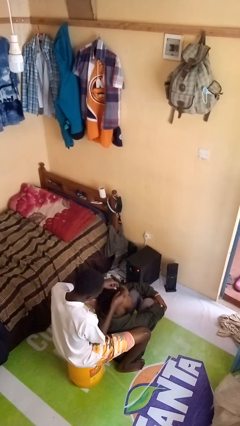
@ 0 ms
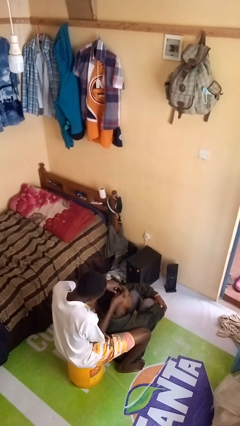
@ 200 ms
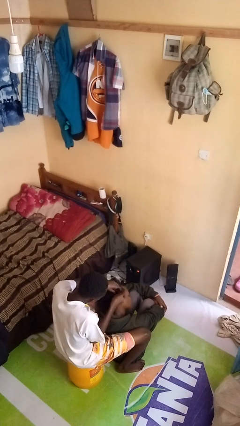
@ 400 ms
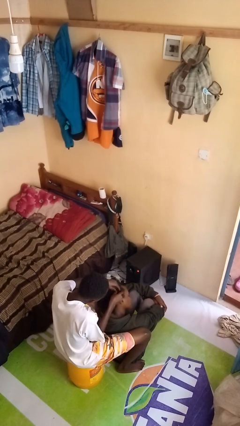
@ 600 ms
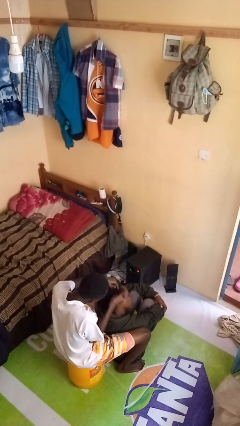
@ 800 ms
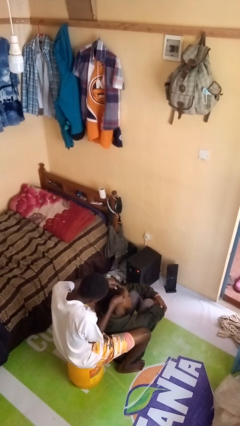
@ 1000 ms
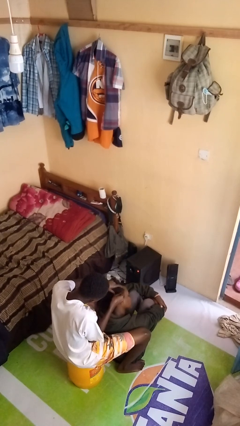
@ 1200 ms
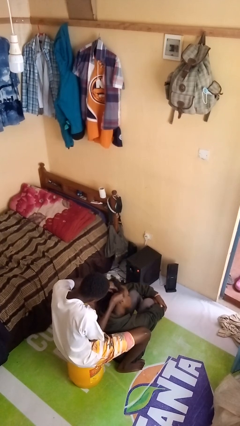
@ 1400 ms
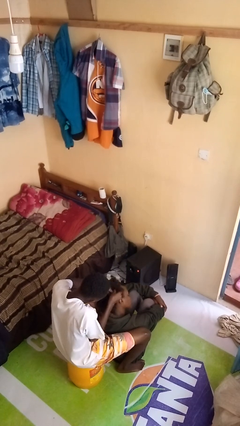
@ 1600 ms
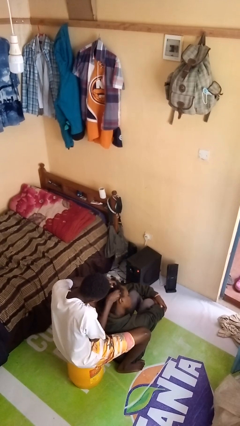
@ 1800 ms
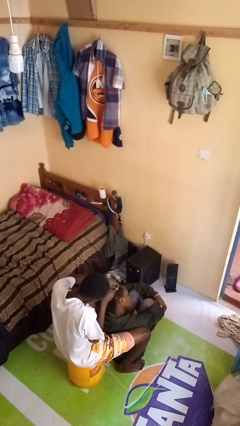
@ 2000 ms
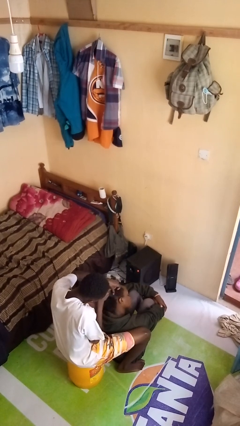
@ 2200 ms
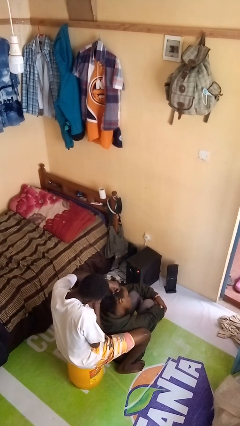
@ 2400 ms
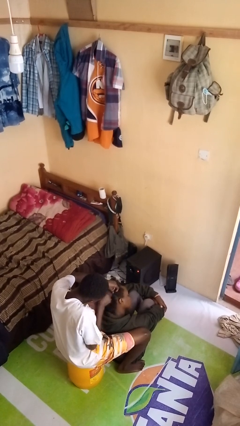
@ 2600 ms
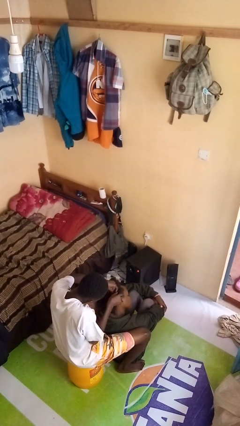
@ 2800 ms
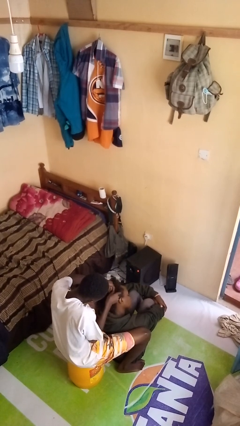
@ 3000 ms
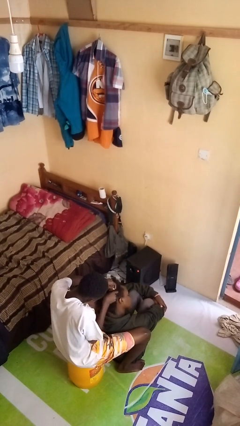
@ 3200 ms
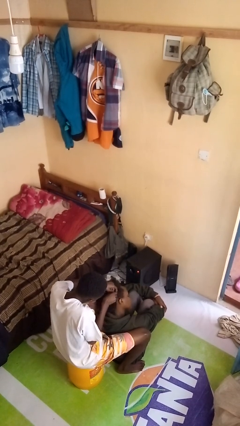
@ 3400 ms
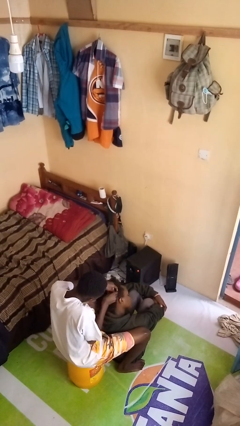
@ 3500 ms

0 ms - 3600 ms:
person braids hair of person

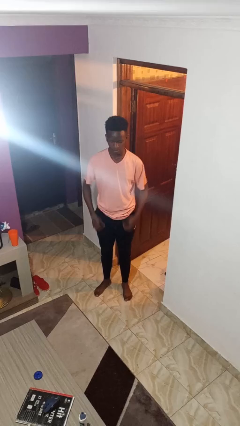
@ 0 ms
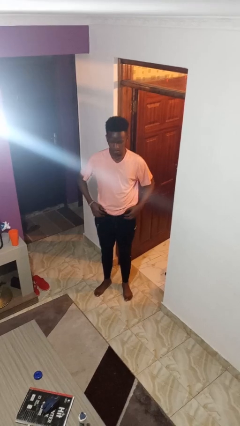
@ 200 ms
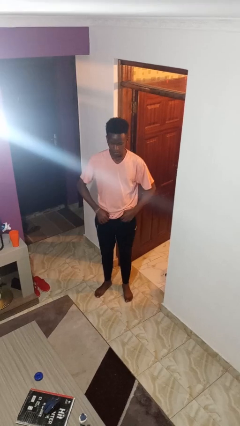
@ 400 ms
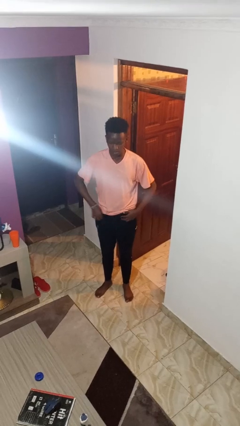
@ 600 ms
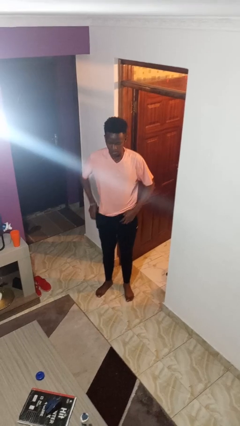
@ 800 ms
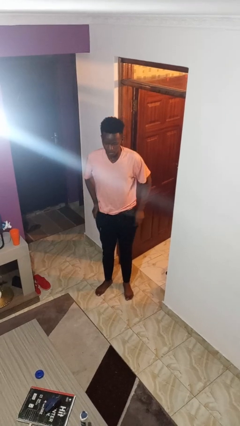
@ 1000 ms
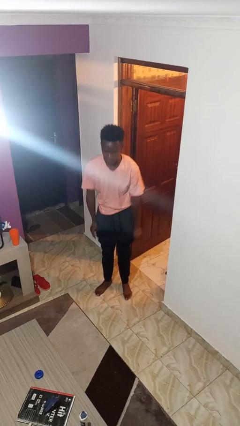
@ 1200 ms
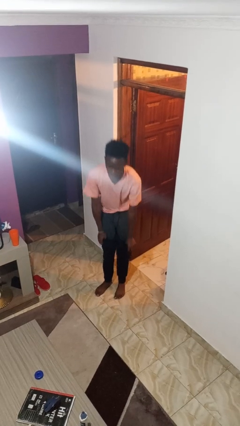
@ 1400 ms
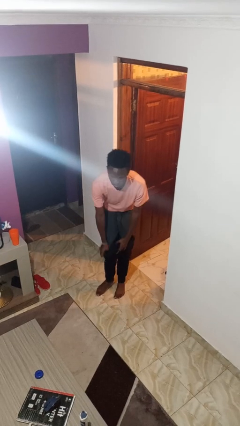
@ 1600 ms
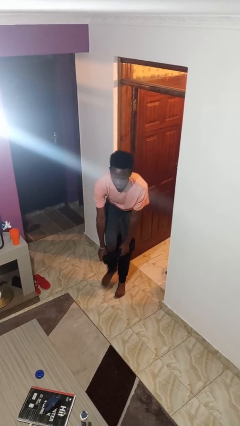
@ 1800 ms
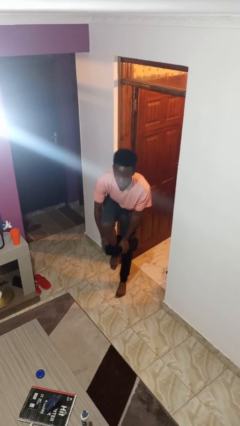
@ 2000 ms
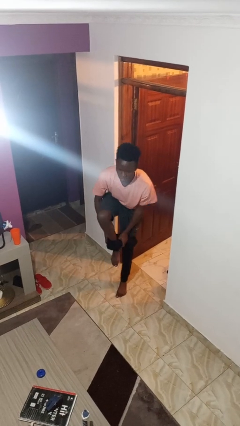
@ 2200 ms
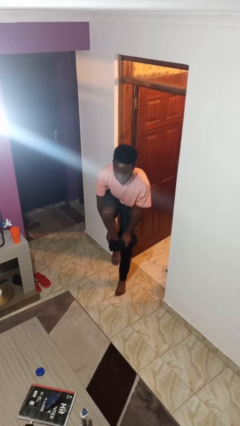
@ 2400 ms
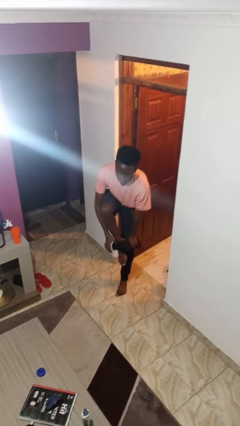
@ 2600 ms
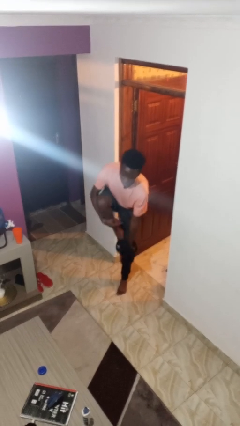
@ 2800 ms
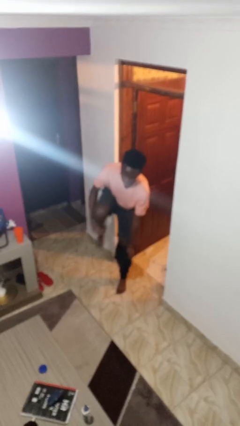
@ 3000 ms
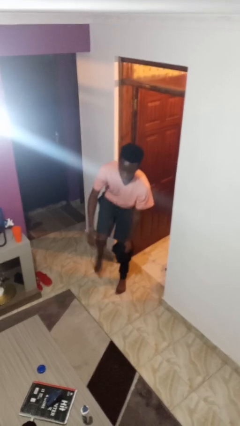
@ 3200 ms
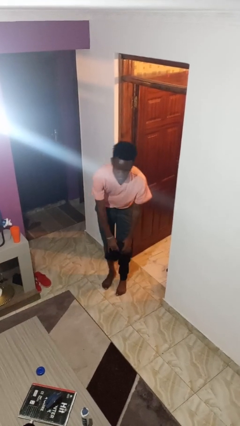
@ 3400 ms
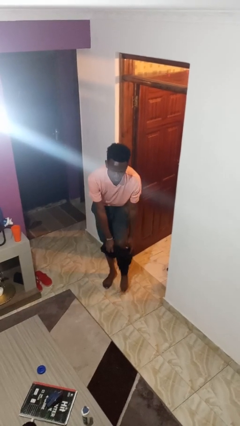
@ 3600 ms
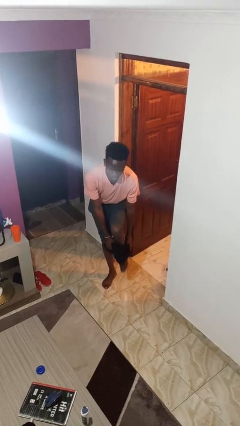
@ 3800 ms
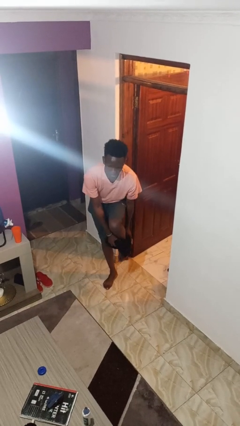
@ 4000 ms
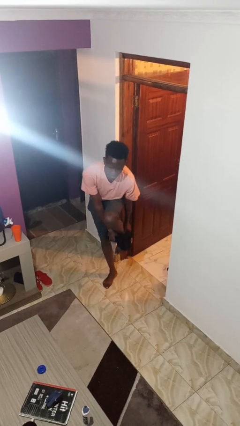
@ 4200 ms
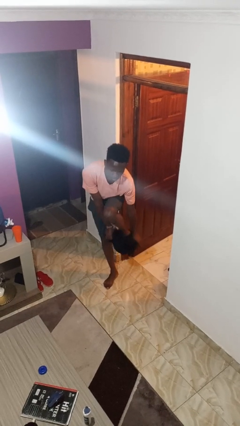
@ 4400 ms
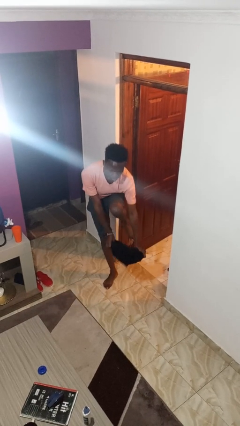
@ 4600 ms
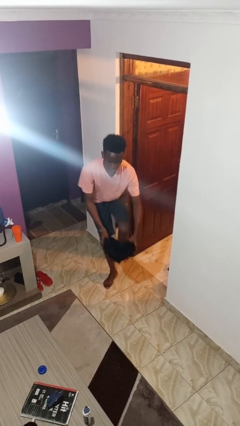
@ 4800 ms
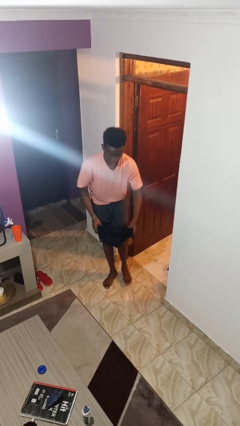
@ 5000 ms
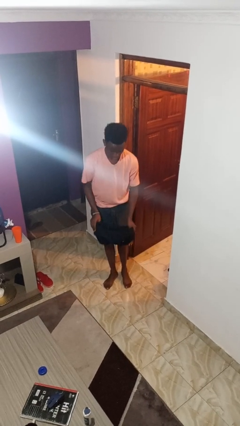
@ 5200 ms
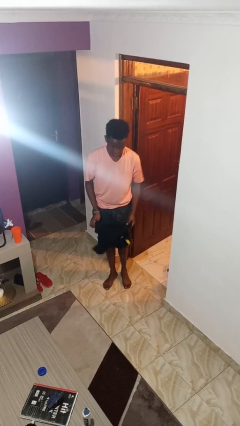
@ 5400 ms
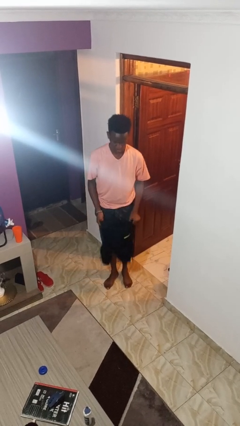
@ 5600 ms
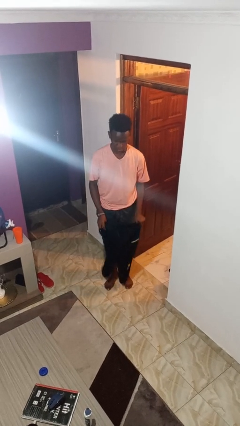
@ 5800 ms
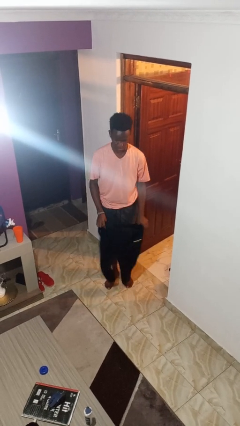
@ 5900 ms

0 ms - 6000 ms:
person takes off pants

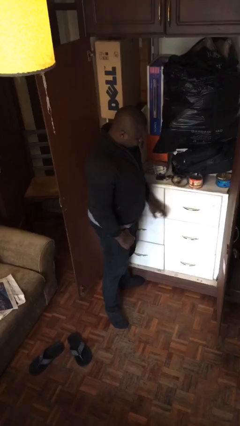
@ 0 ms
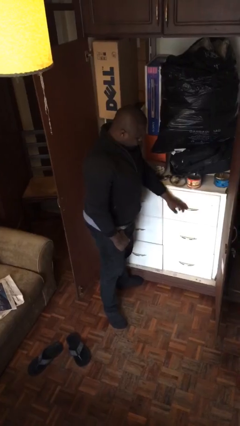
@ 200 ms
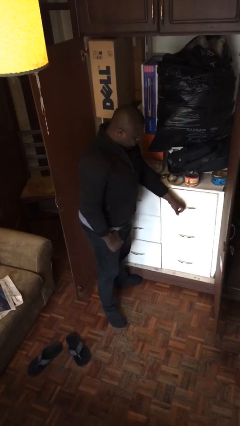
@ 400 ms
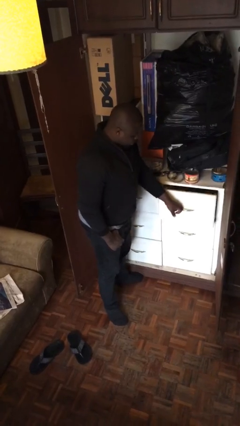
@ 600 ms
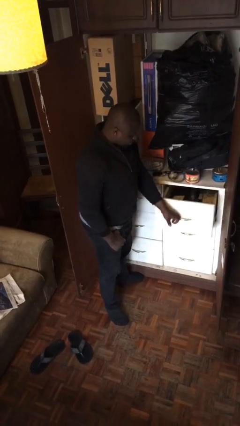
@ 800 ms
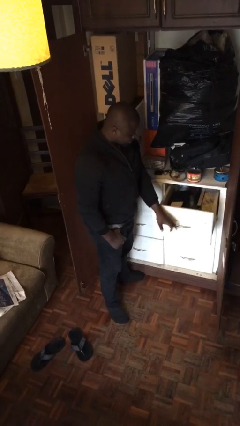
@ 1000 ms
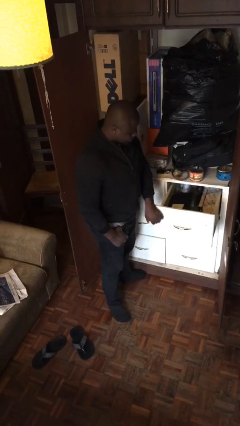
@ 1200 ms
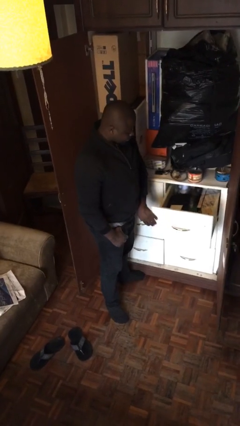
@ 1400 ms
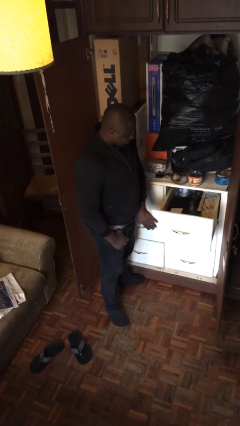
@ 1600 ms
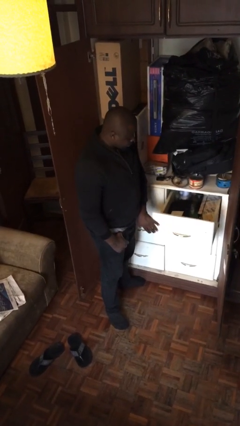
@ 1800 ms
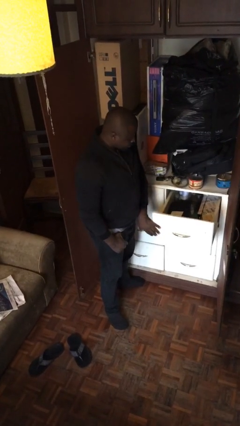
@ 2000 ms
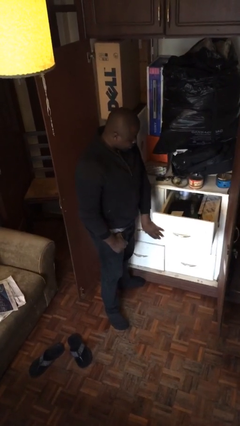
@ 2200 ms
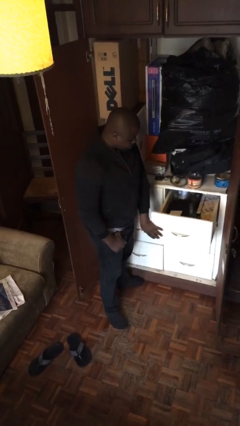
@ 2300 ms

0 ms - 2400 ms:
person opens dresser drawer

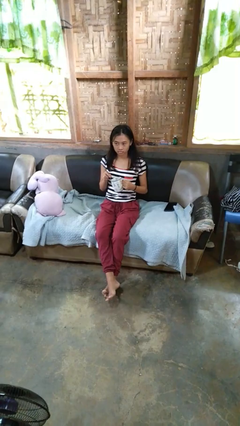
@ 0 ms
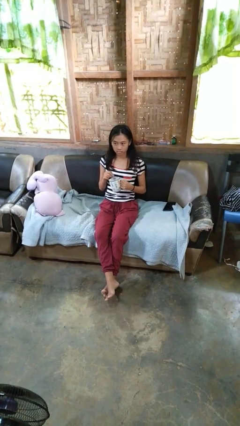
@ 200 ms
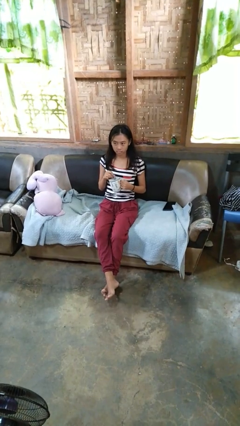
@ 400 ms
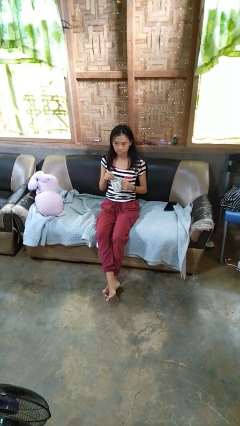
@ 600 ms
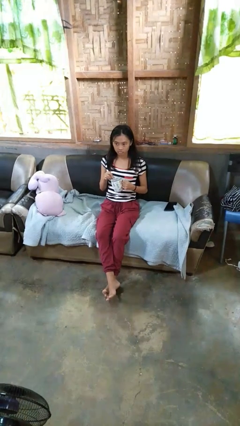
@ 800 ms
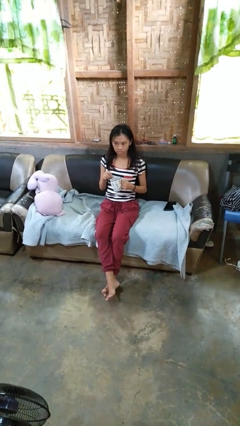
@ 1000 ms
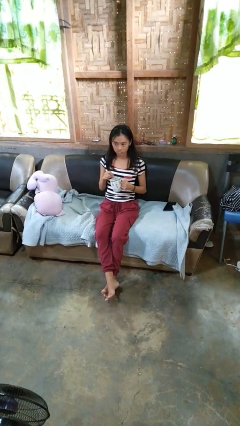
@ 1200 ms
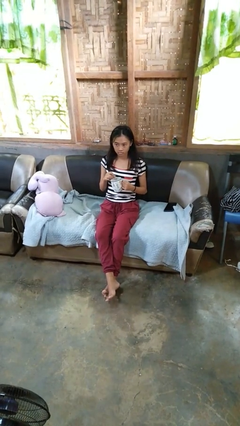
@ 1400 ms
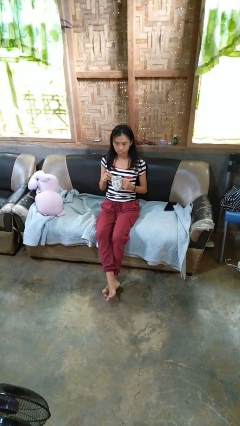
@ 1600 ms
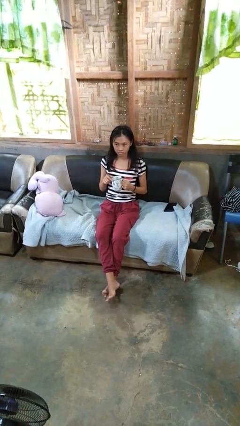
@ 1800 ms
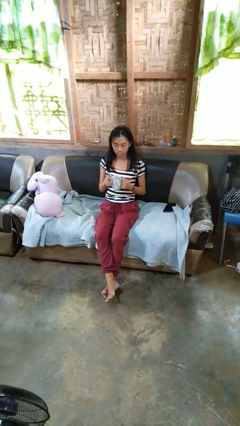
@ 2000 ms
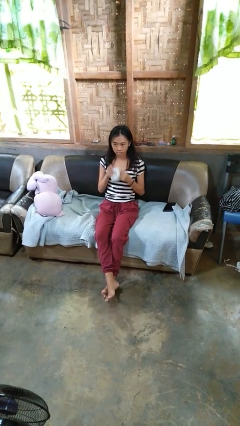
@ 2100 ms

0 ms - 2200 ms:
person stirs mug

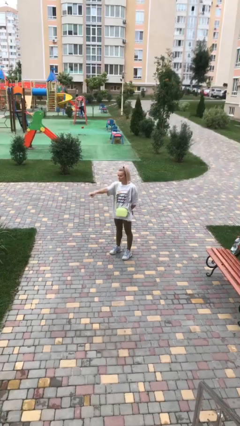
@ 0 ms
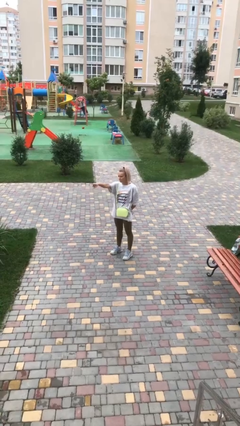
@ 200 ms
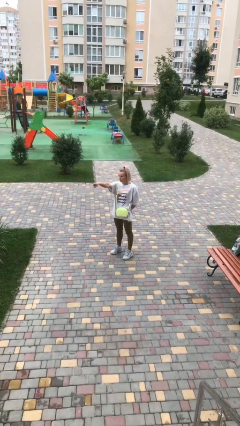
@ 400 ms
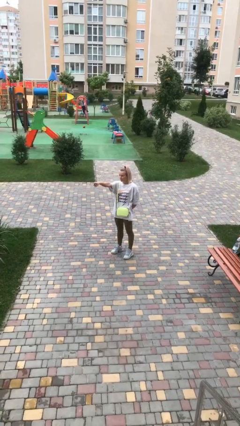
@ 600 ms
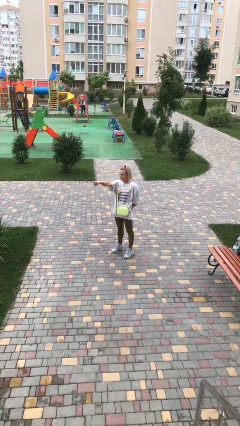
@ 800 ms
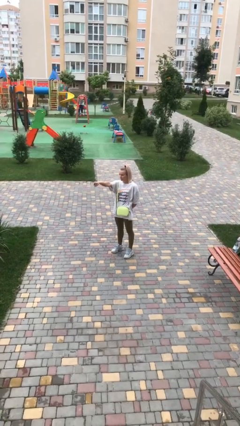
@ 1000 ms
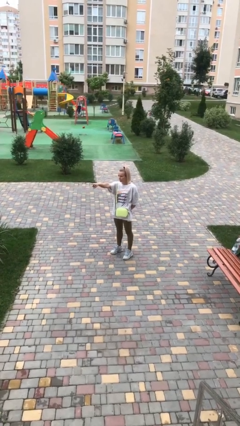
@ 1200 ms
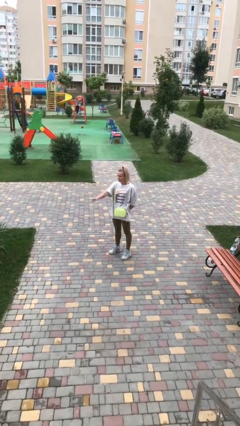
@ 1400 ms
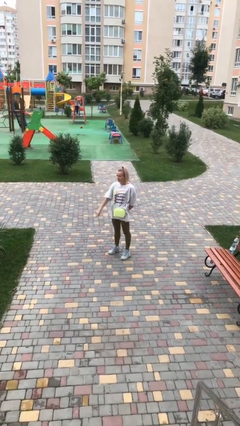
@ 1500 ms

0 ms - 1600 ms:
person points at person

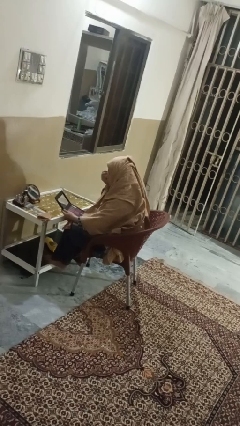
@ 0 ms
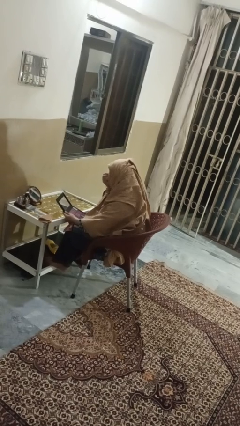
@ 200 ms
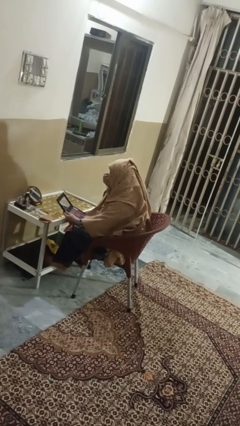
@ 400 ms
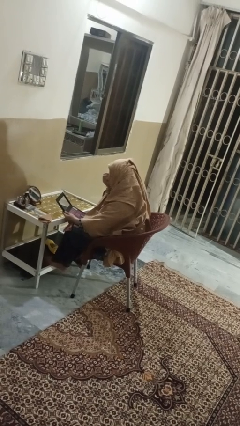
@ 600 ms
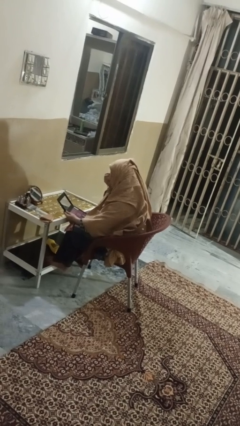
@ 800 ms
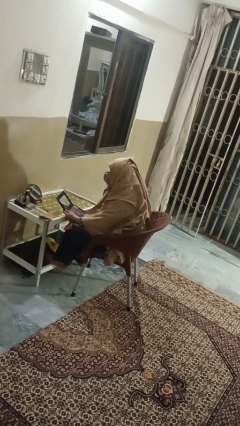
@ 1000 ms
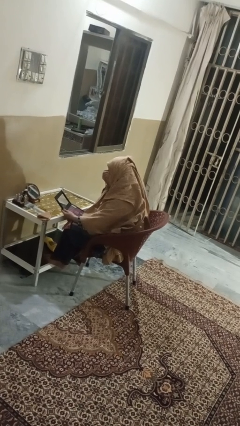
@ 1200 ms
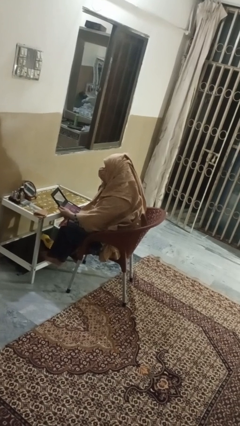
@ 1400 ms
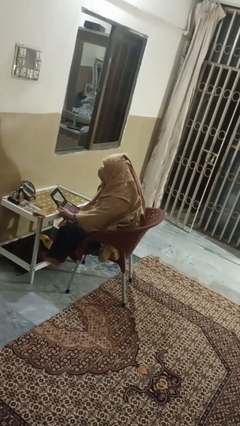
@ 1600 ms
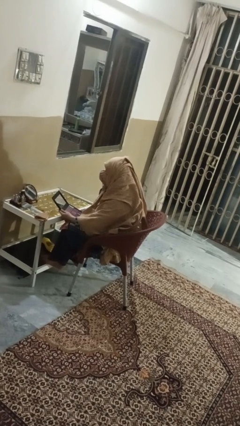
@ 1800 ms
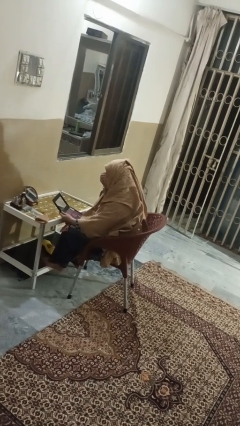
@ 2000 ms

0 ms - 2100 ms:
person applies eye makeup
